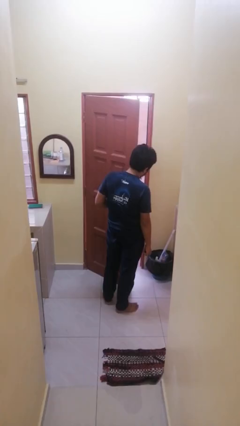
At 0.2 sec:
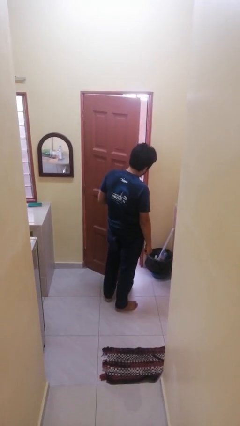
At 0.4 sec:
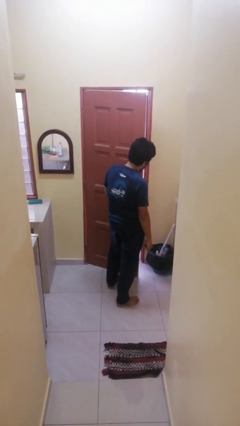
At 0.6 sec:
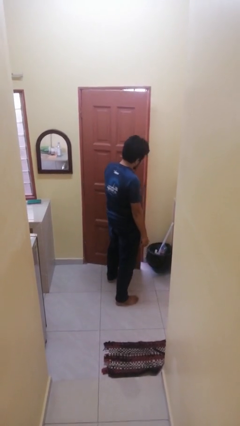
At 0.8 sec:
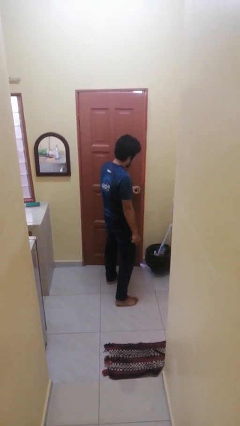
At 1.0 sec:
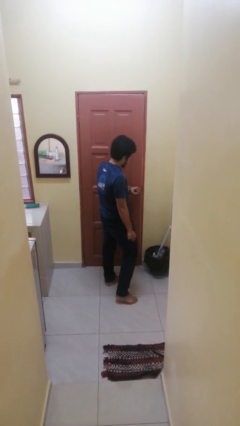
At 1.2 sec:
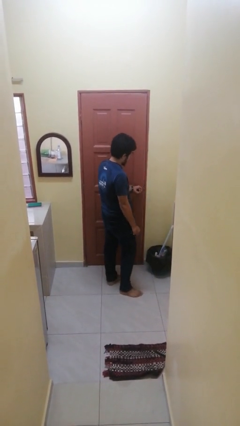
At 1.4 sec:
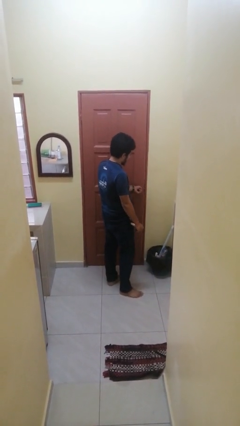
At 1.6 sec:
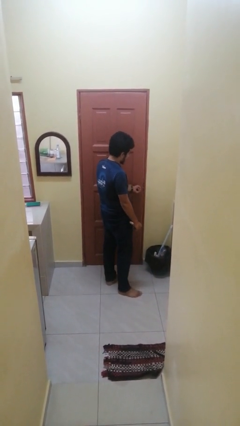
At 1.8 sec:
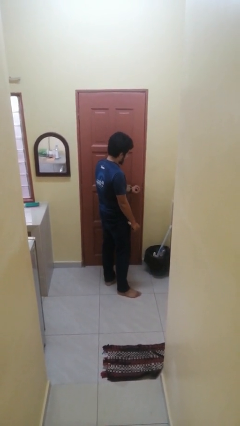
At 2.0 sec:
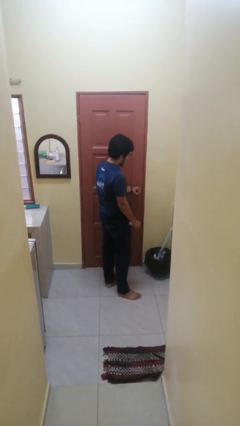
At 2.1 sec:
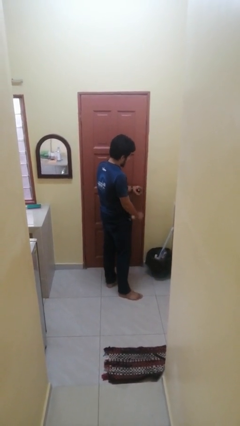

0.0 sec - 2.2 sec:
person closes facility door

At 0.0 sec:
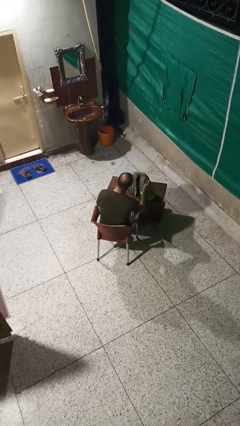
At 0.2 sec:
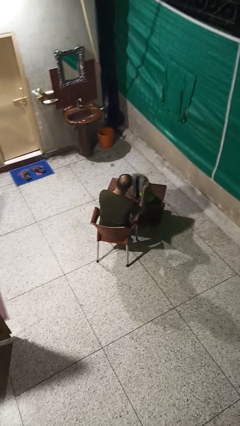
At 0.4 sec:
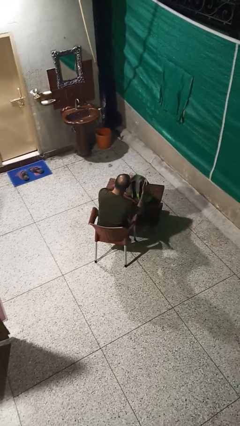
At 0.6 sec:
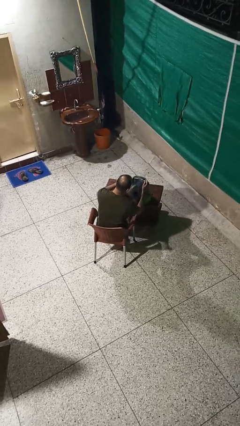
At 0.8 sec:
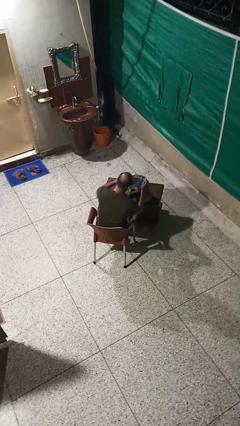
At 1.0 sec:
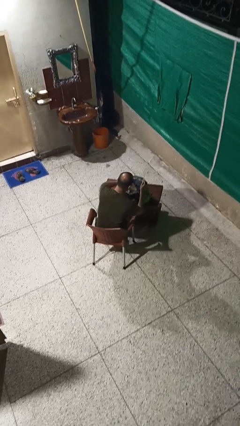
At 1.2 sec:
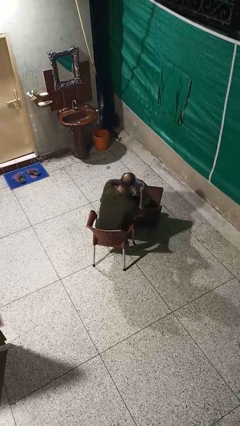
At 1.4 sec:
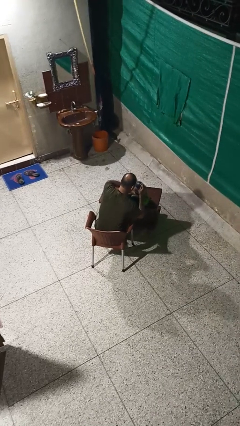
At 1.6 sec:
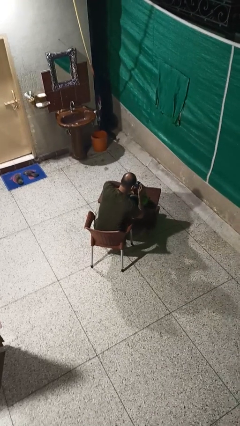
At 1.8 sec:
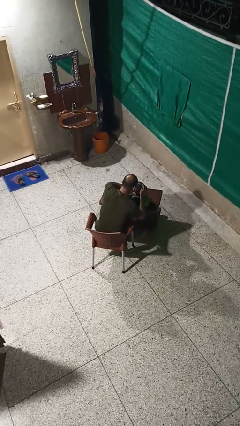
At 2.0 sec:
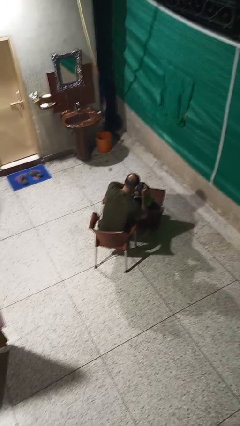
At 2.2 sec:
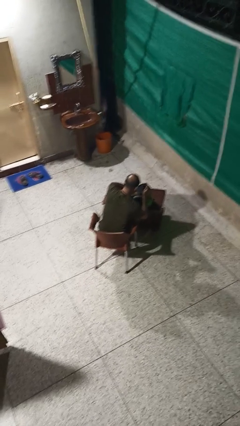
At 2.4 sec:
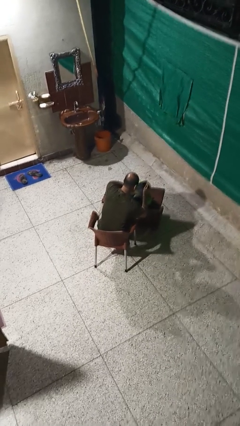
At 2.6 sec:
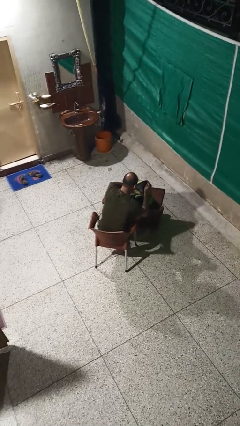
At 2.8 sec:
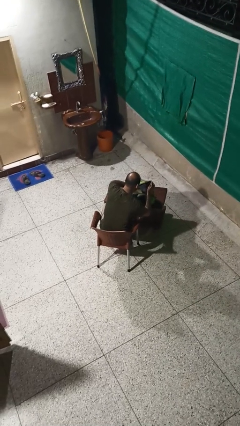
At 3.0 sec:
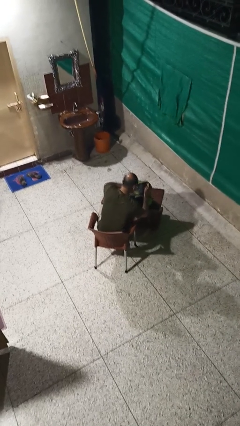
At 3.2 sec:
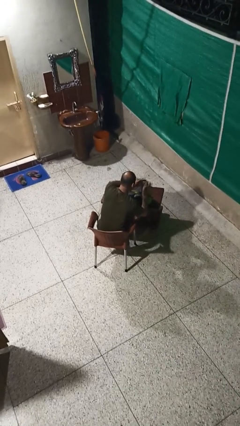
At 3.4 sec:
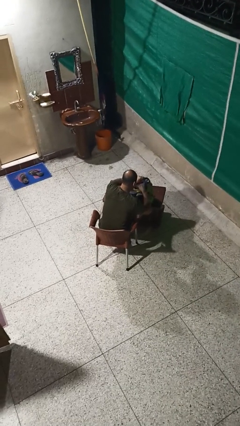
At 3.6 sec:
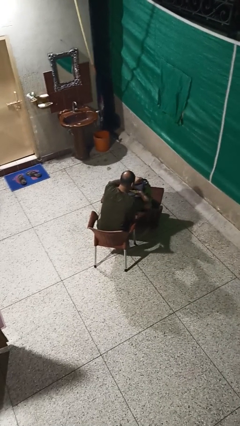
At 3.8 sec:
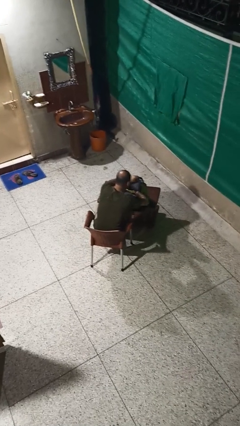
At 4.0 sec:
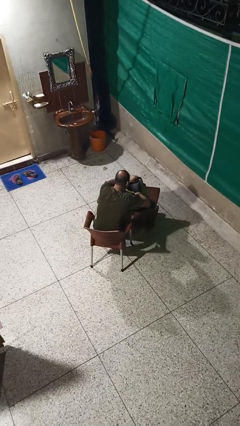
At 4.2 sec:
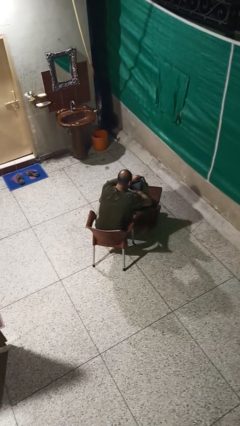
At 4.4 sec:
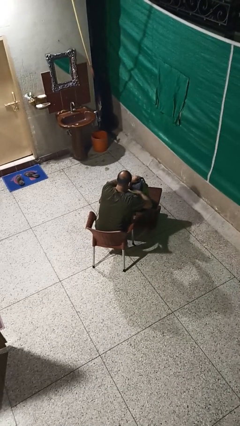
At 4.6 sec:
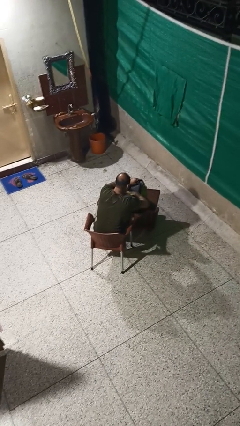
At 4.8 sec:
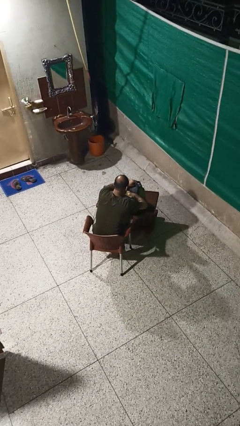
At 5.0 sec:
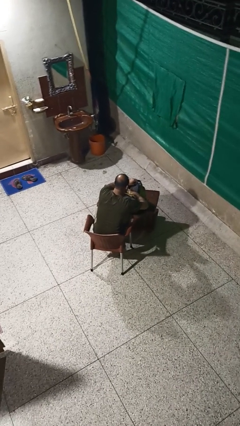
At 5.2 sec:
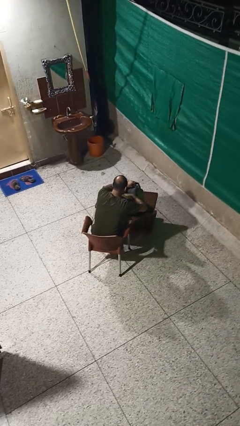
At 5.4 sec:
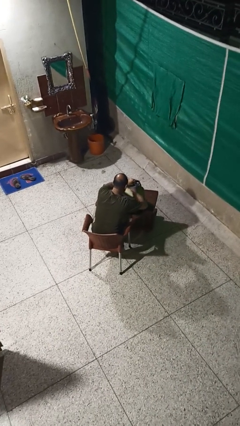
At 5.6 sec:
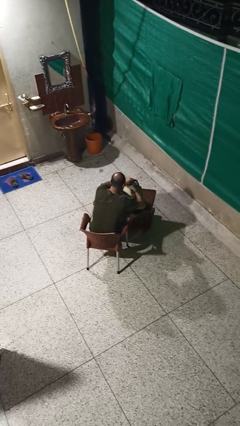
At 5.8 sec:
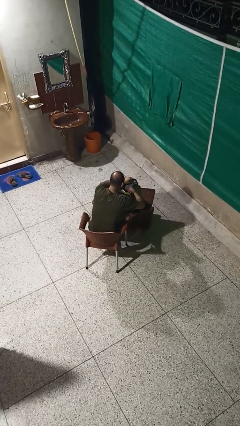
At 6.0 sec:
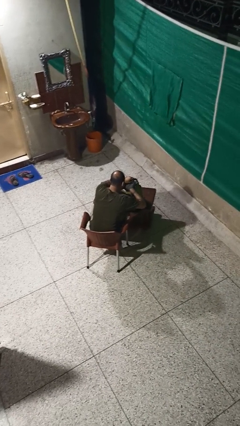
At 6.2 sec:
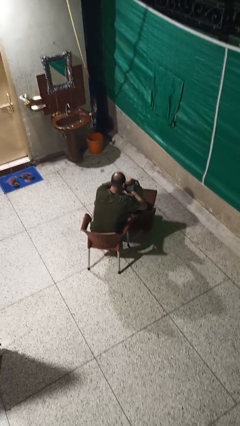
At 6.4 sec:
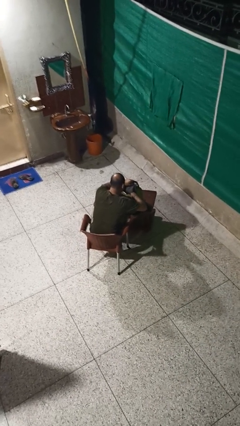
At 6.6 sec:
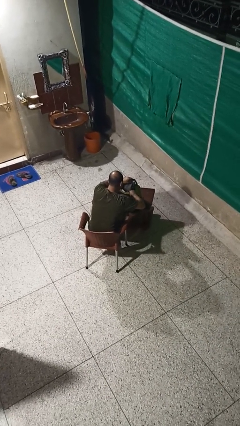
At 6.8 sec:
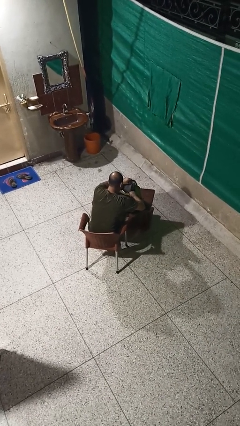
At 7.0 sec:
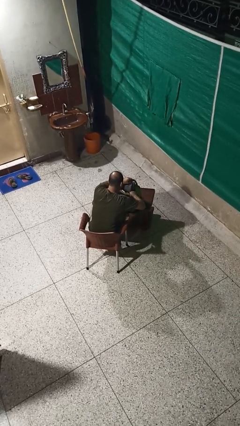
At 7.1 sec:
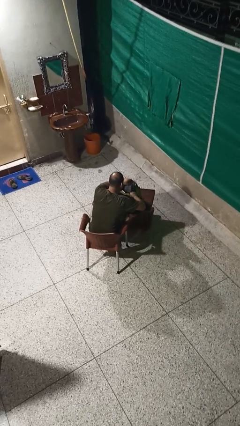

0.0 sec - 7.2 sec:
person searches in backpack

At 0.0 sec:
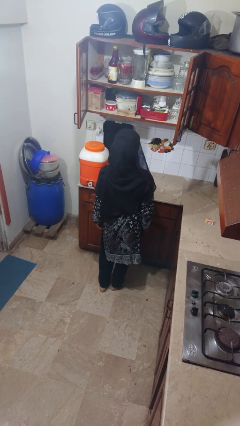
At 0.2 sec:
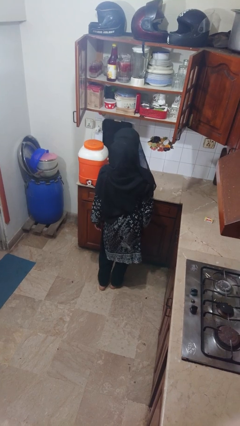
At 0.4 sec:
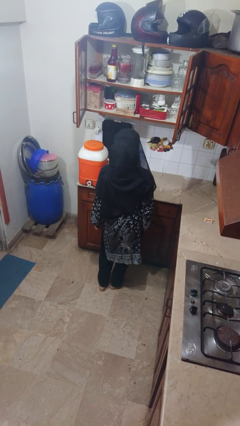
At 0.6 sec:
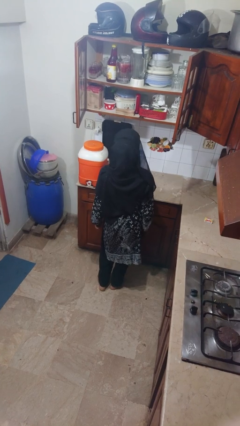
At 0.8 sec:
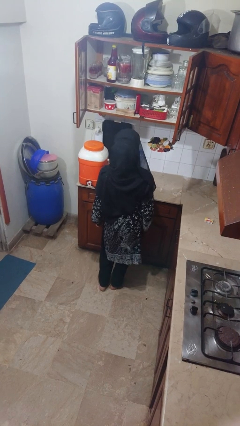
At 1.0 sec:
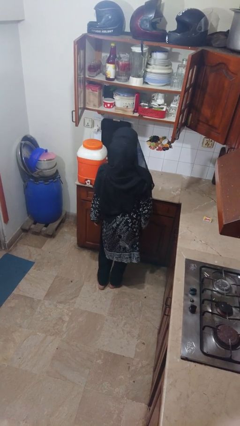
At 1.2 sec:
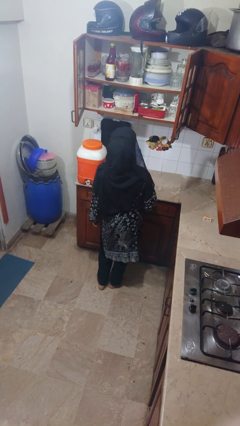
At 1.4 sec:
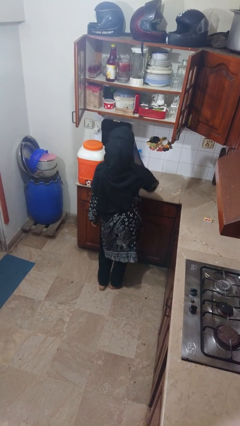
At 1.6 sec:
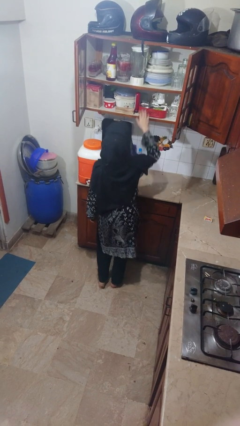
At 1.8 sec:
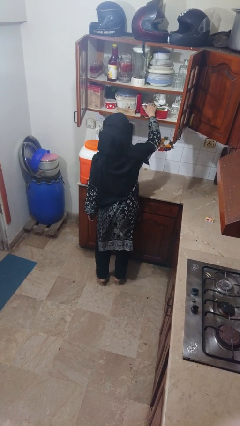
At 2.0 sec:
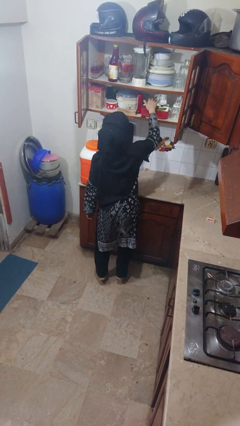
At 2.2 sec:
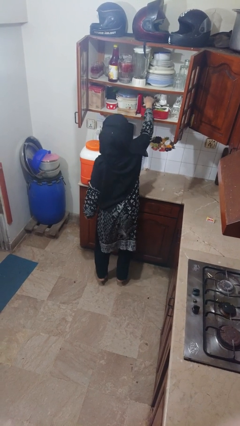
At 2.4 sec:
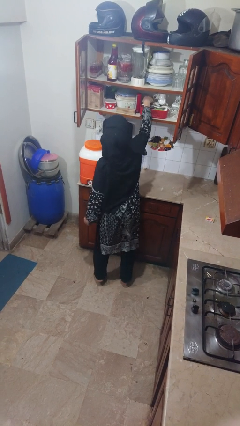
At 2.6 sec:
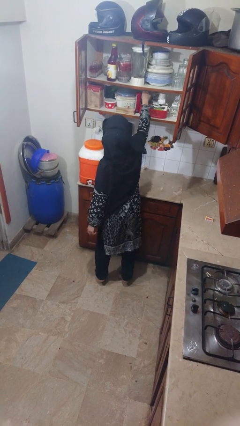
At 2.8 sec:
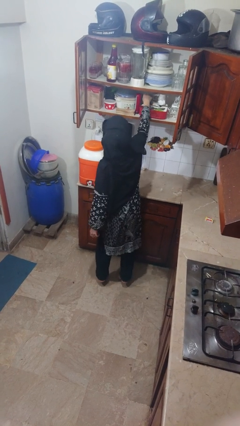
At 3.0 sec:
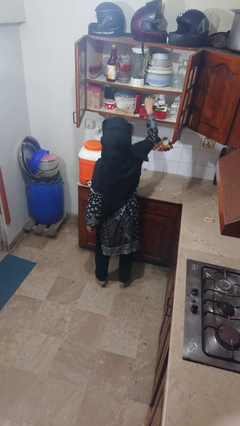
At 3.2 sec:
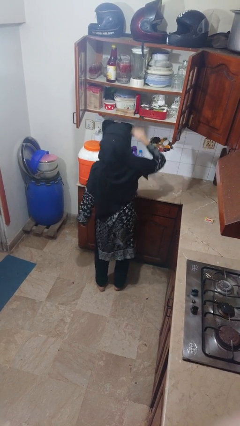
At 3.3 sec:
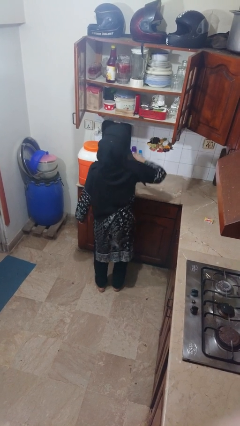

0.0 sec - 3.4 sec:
person searches in cabinet

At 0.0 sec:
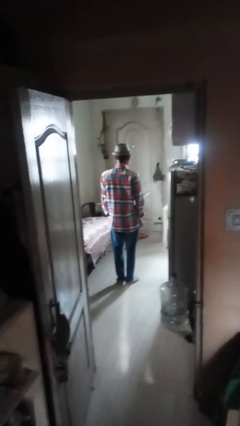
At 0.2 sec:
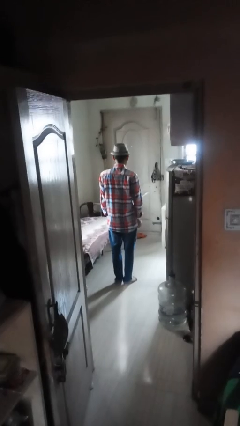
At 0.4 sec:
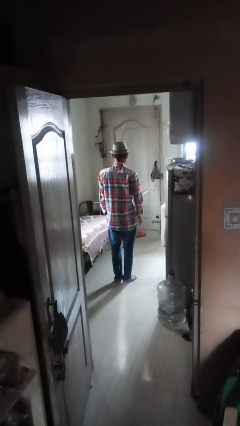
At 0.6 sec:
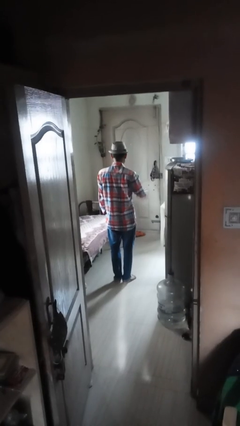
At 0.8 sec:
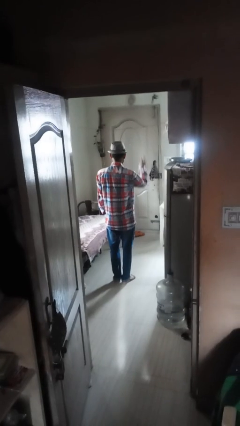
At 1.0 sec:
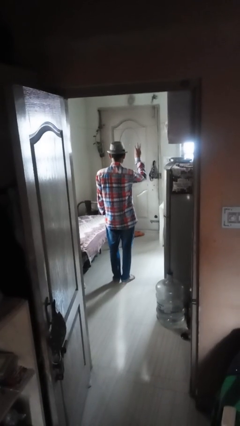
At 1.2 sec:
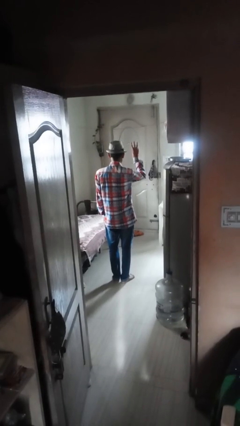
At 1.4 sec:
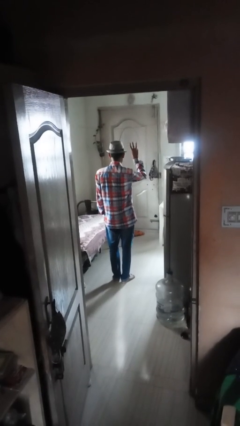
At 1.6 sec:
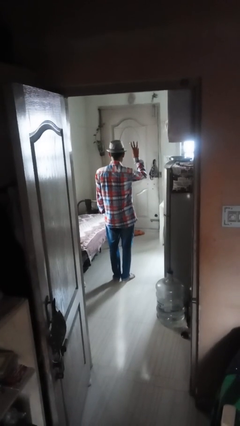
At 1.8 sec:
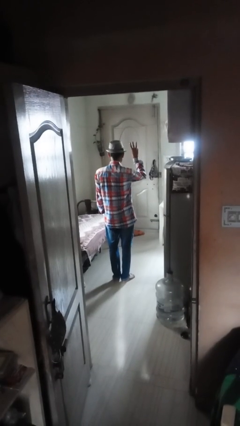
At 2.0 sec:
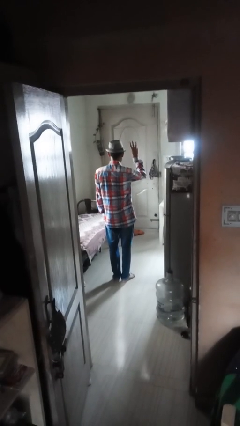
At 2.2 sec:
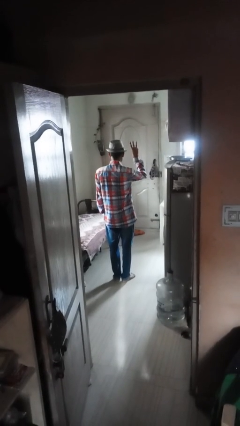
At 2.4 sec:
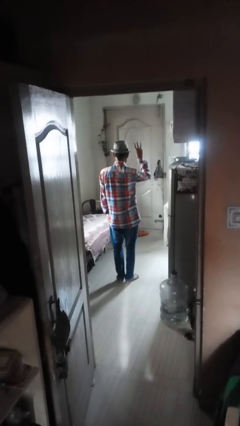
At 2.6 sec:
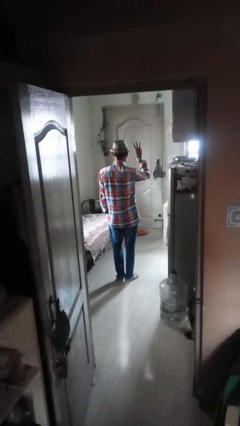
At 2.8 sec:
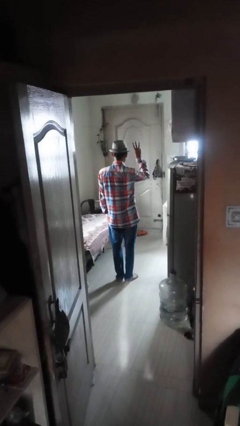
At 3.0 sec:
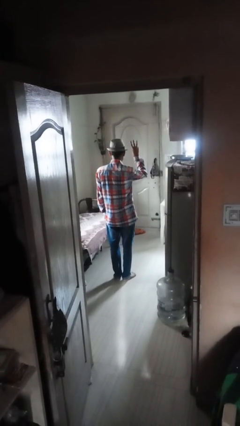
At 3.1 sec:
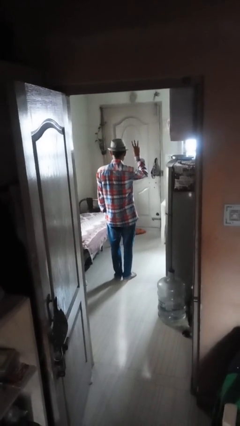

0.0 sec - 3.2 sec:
person gestures number three

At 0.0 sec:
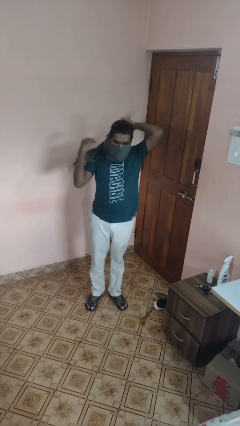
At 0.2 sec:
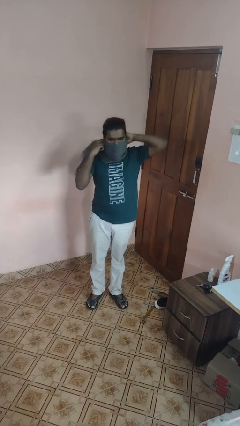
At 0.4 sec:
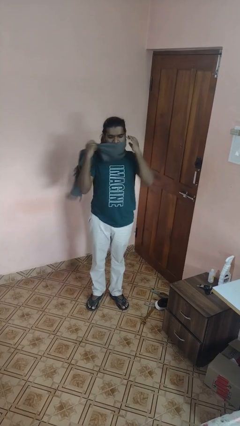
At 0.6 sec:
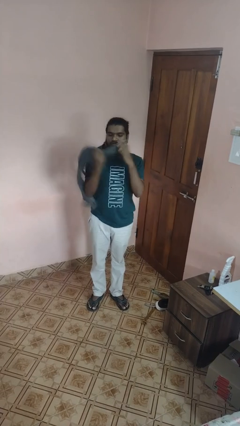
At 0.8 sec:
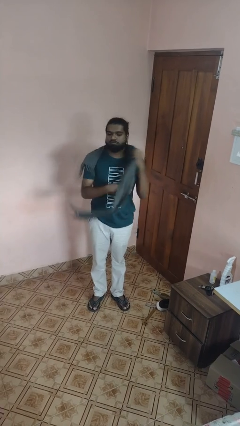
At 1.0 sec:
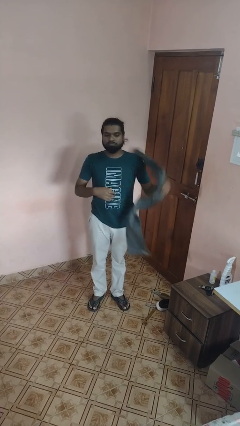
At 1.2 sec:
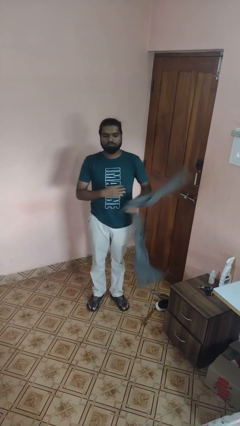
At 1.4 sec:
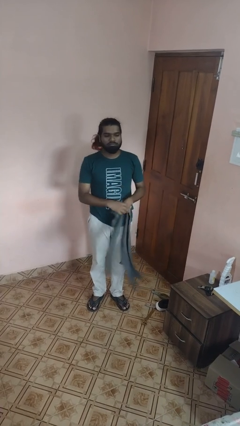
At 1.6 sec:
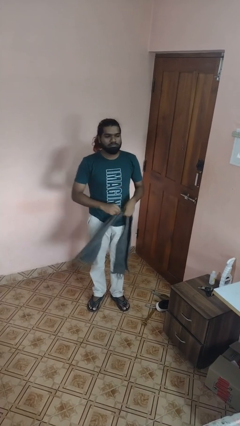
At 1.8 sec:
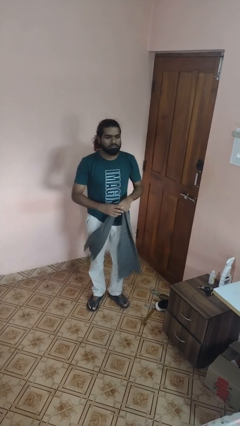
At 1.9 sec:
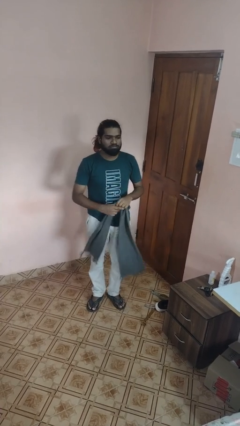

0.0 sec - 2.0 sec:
person takes off scarf
